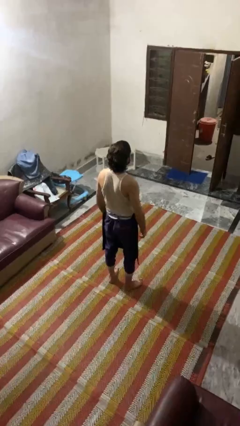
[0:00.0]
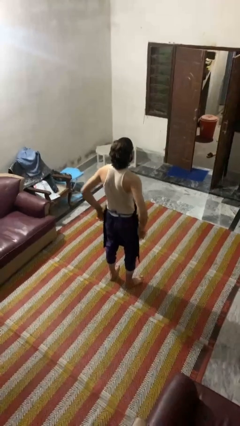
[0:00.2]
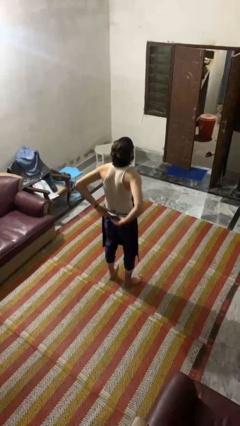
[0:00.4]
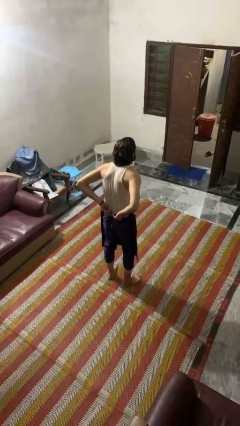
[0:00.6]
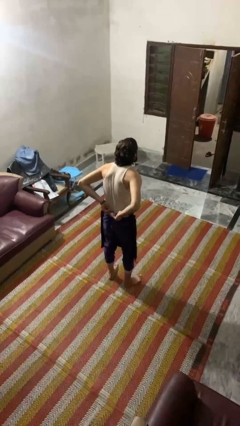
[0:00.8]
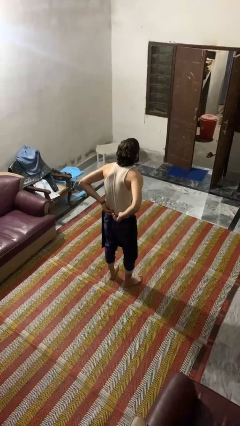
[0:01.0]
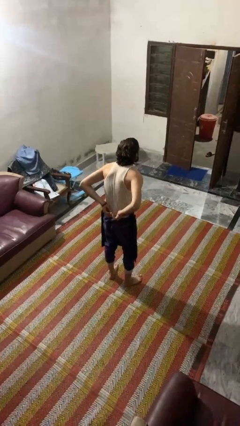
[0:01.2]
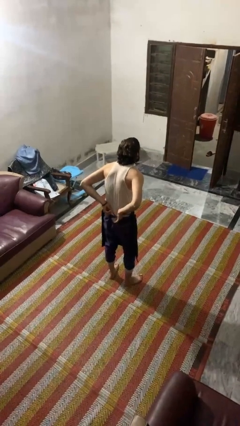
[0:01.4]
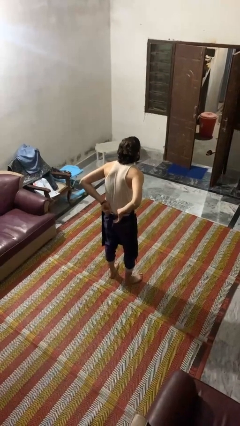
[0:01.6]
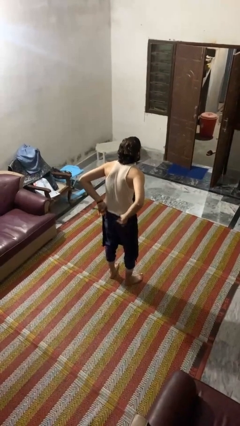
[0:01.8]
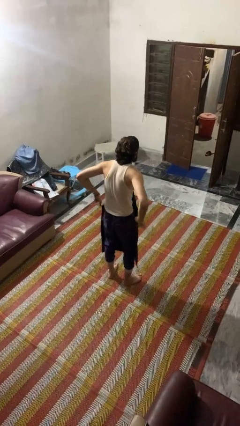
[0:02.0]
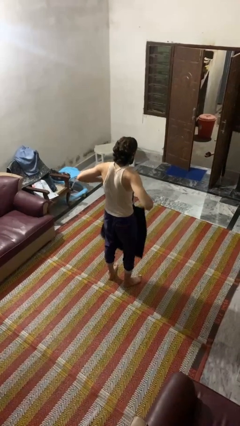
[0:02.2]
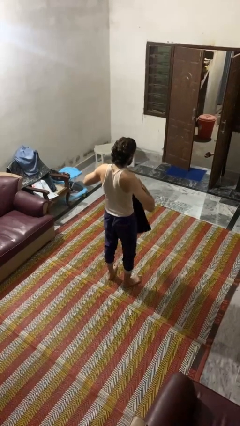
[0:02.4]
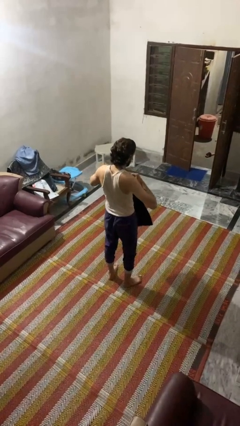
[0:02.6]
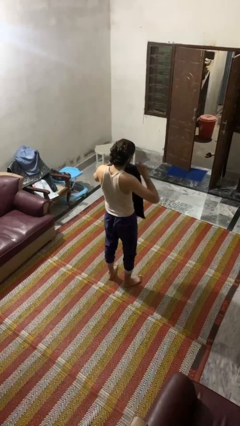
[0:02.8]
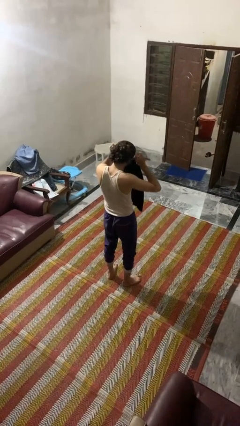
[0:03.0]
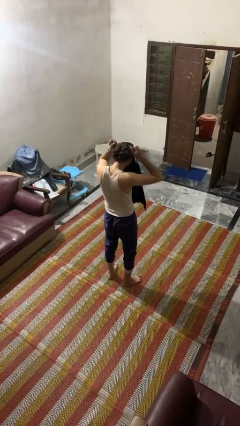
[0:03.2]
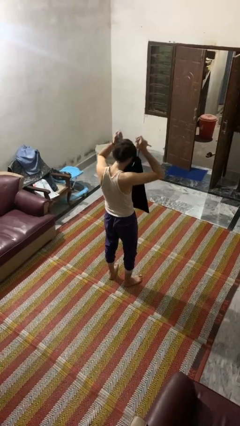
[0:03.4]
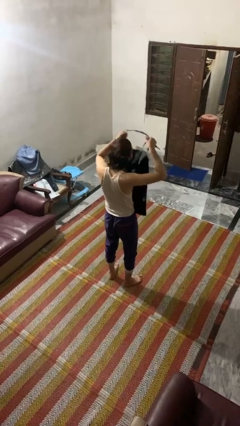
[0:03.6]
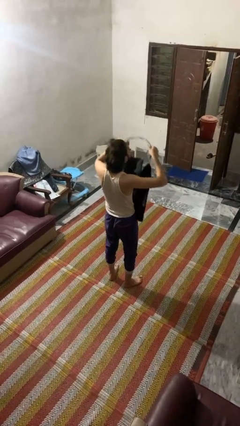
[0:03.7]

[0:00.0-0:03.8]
person takes off apron

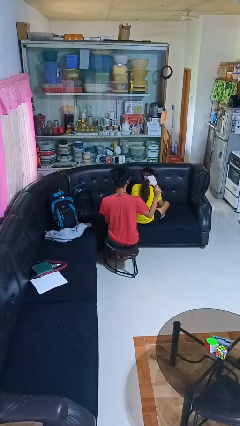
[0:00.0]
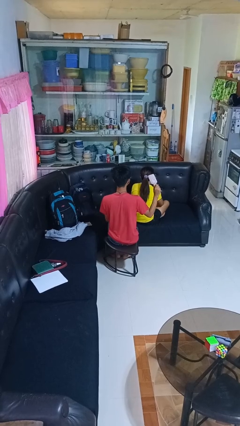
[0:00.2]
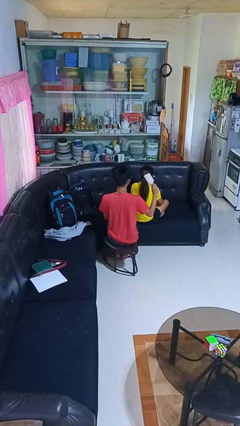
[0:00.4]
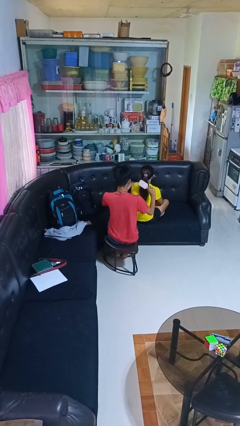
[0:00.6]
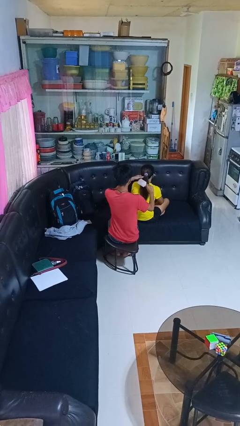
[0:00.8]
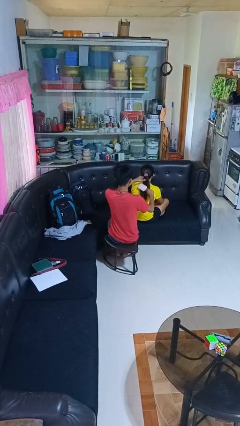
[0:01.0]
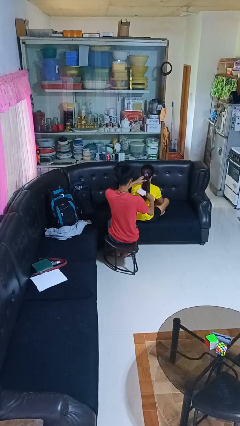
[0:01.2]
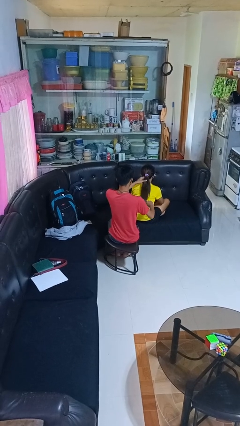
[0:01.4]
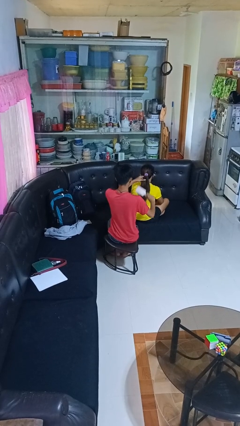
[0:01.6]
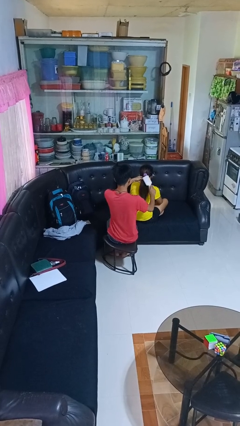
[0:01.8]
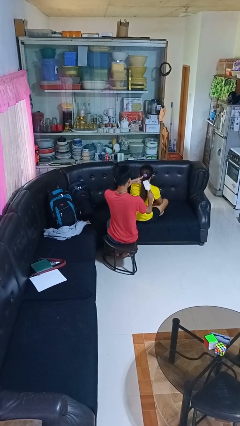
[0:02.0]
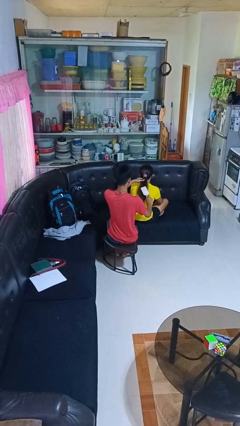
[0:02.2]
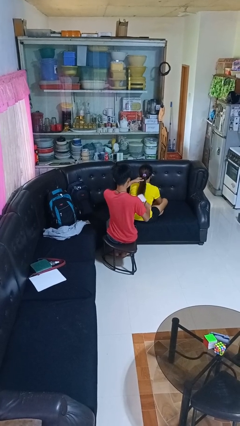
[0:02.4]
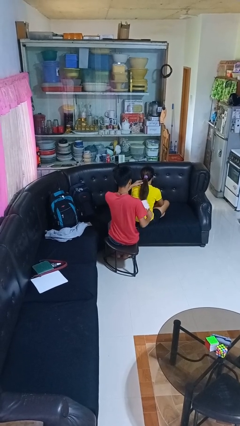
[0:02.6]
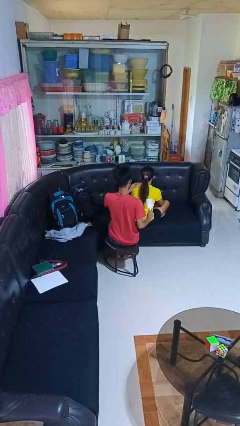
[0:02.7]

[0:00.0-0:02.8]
person brushes hair of person

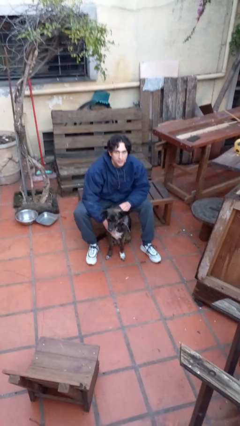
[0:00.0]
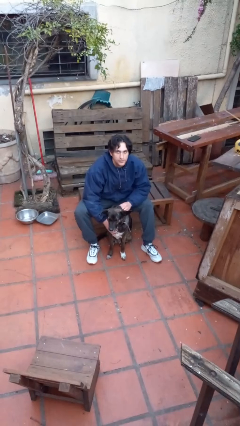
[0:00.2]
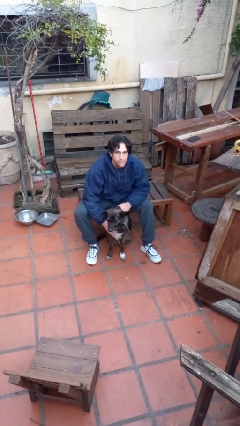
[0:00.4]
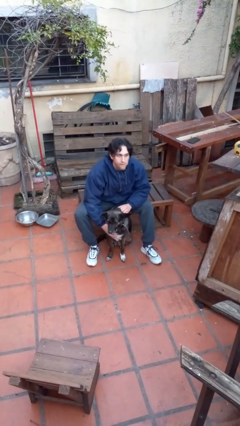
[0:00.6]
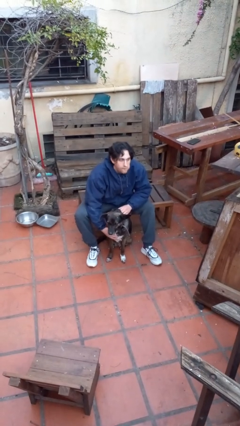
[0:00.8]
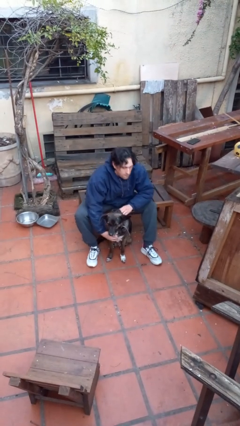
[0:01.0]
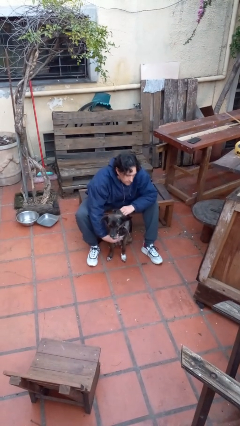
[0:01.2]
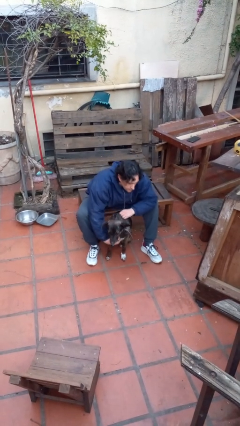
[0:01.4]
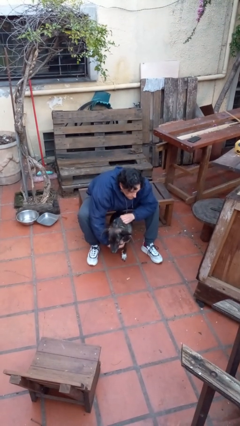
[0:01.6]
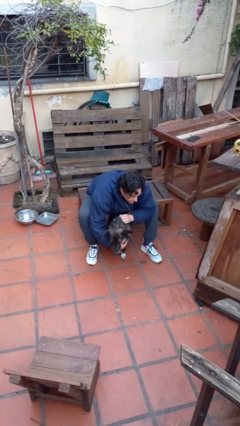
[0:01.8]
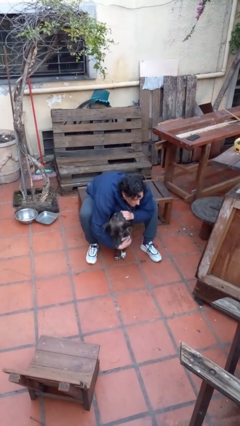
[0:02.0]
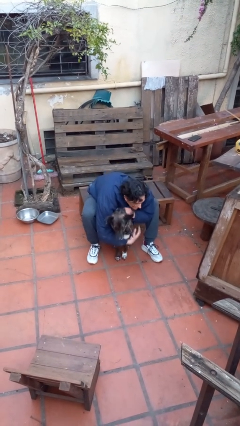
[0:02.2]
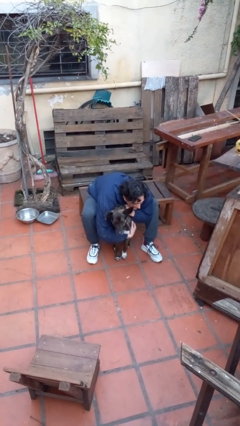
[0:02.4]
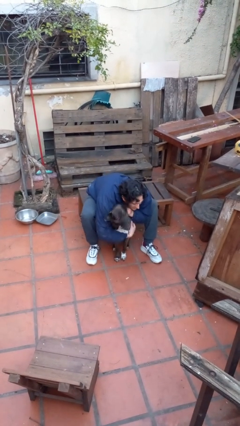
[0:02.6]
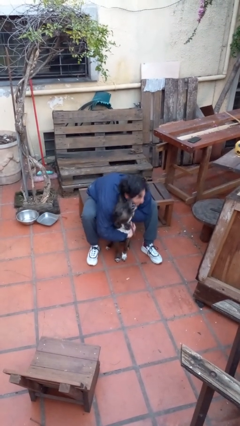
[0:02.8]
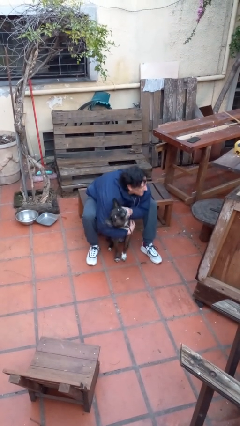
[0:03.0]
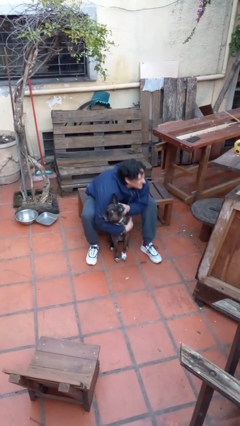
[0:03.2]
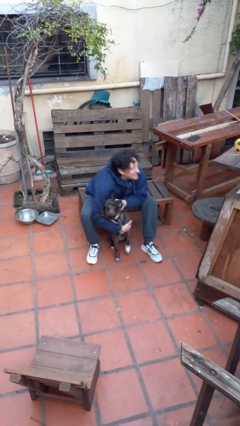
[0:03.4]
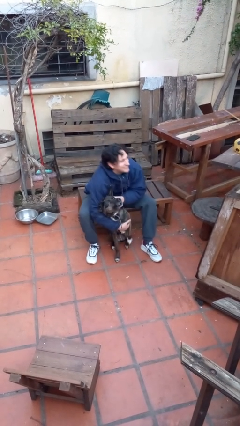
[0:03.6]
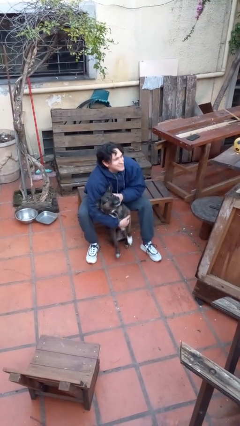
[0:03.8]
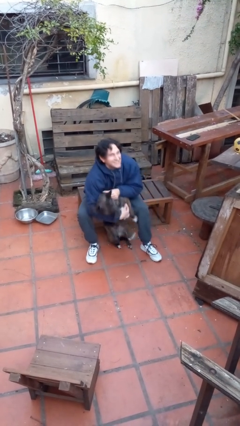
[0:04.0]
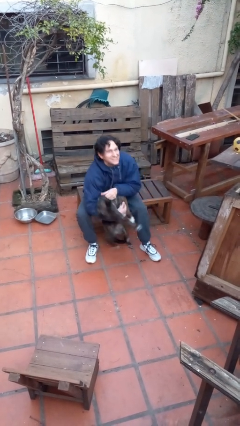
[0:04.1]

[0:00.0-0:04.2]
person hugs dog

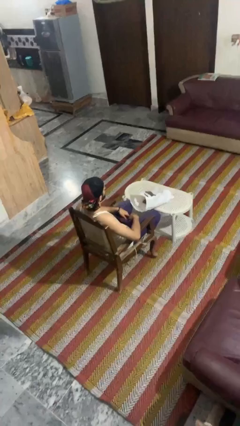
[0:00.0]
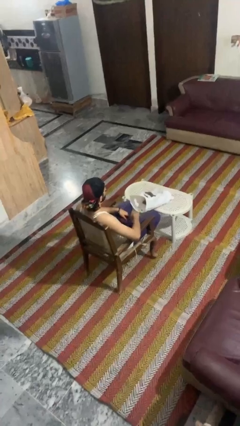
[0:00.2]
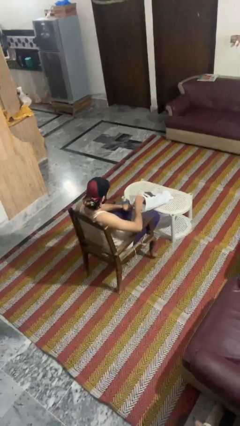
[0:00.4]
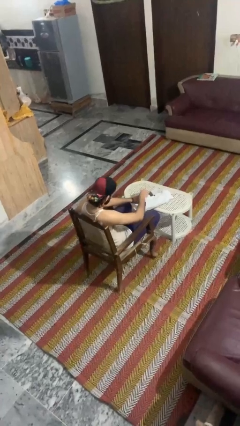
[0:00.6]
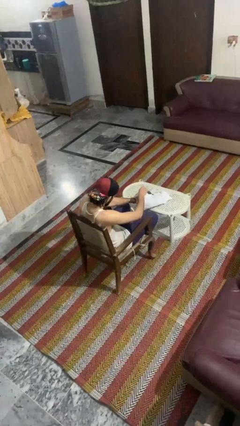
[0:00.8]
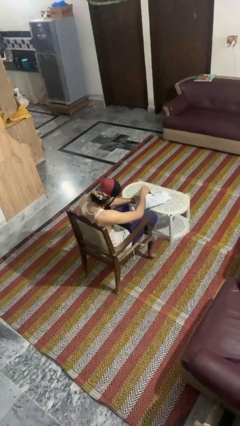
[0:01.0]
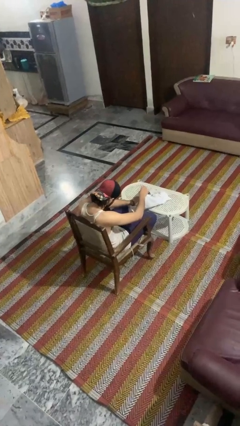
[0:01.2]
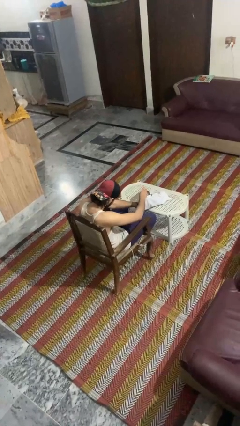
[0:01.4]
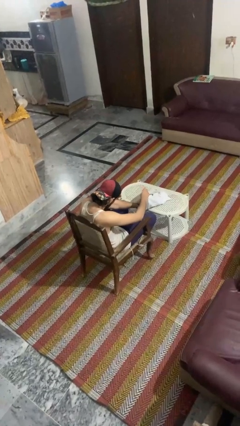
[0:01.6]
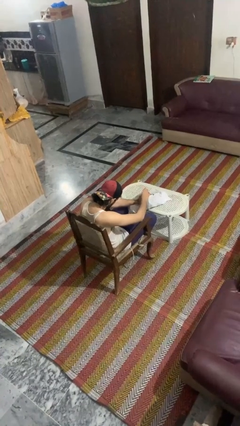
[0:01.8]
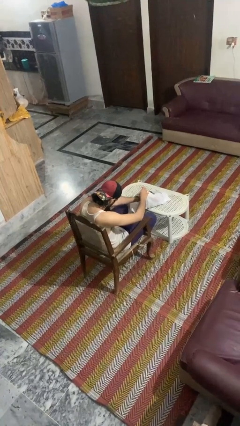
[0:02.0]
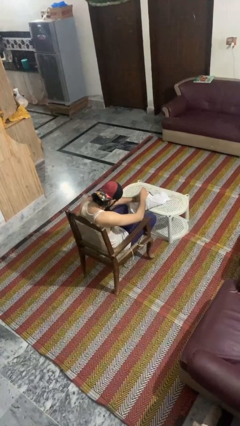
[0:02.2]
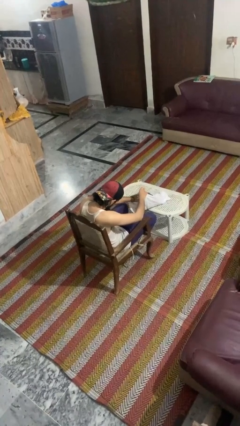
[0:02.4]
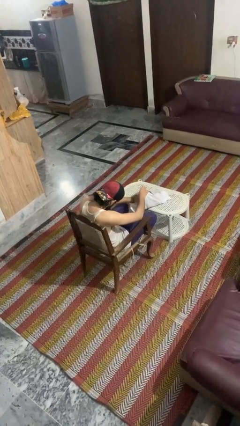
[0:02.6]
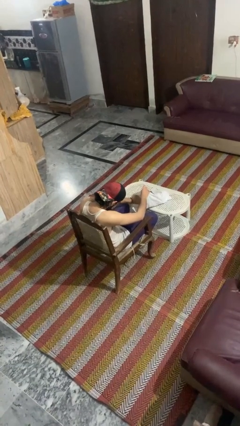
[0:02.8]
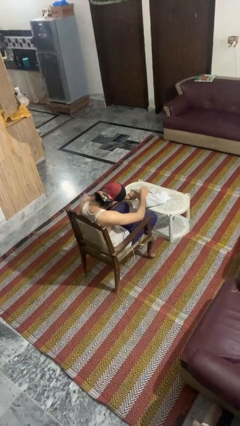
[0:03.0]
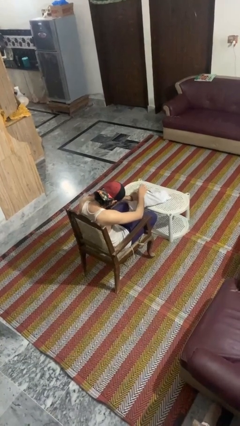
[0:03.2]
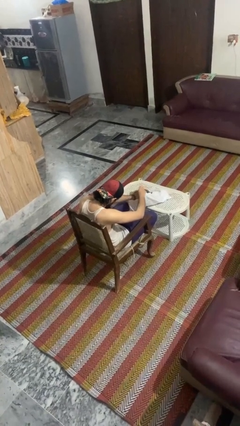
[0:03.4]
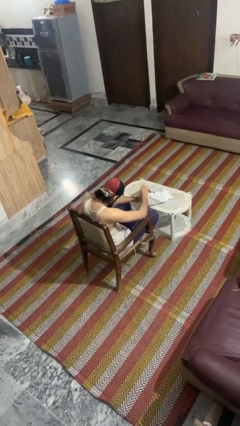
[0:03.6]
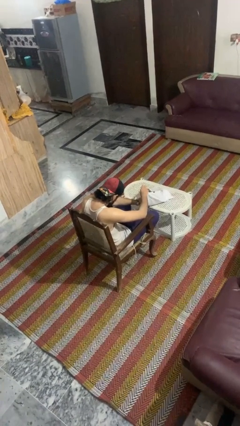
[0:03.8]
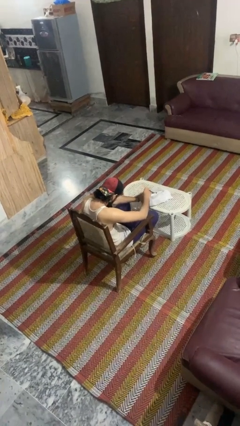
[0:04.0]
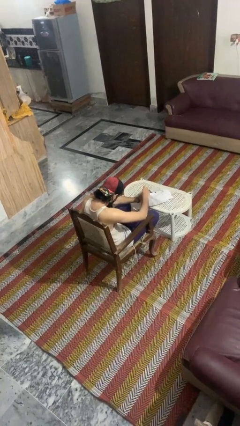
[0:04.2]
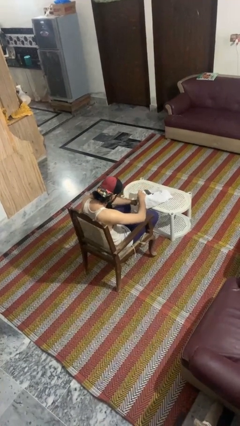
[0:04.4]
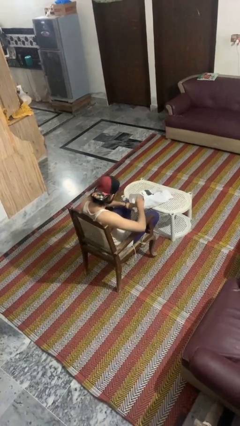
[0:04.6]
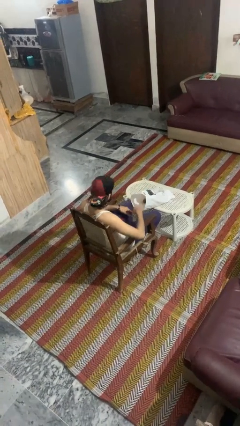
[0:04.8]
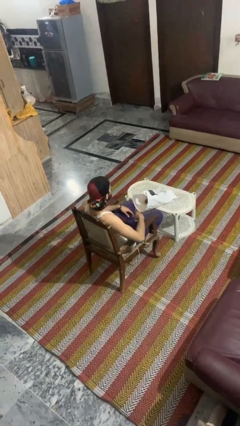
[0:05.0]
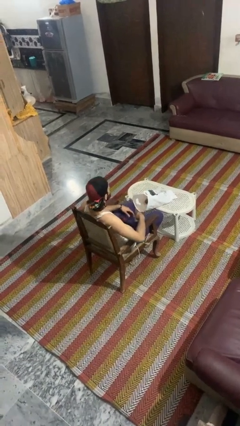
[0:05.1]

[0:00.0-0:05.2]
person searches in bag

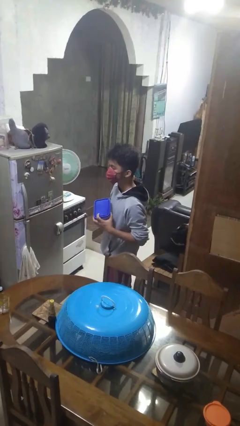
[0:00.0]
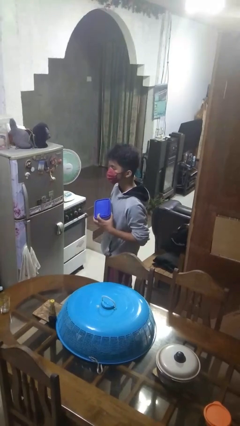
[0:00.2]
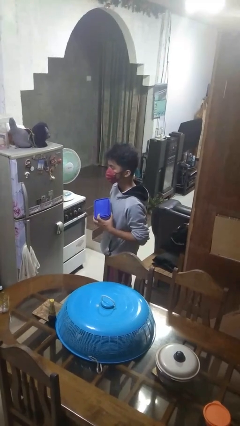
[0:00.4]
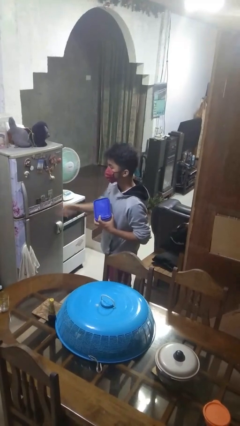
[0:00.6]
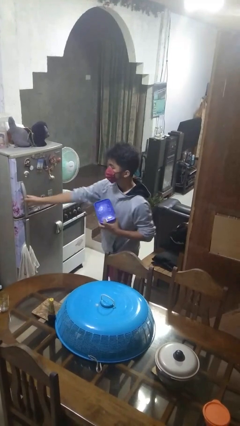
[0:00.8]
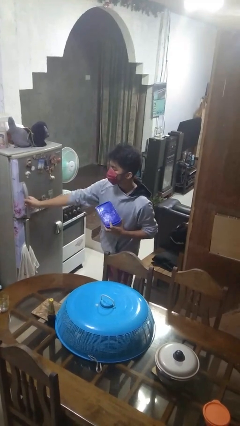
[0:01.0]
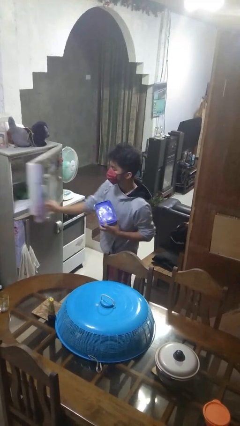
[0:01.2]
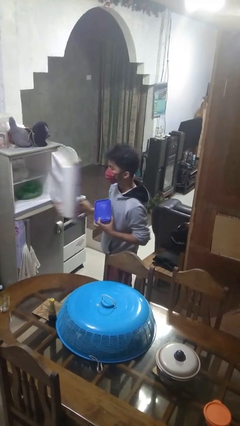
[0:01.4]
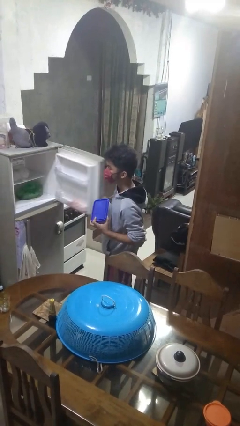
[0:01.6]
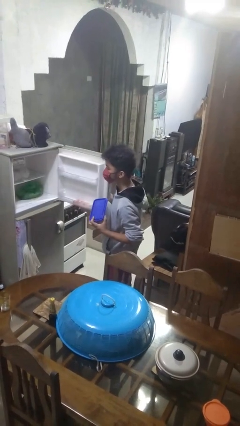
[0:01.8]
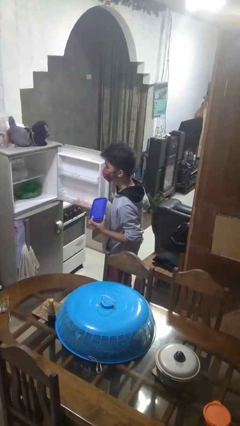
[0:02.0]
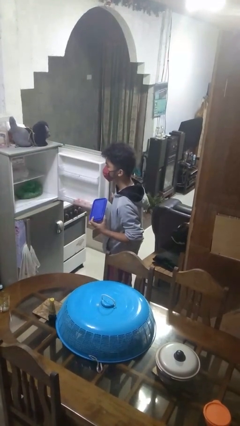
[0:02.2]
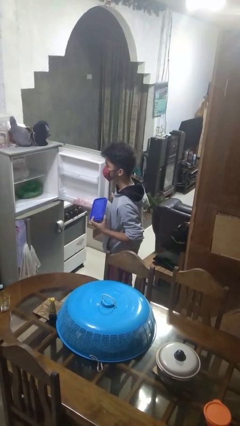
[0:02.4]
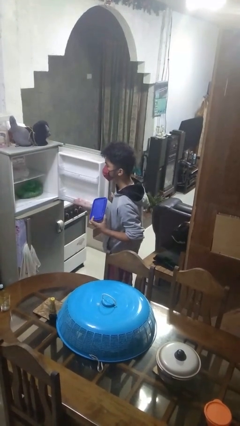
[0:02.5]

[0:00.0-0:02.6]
person opens refrigerator
